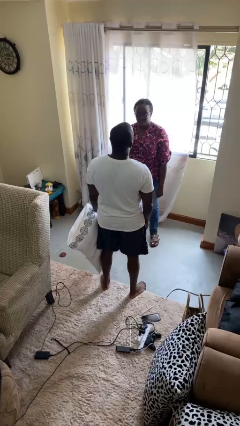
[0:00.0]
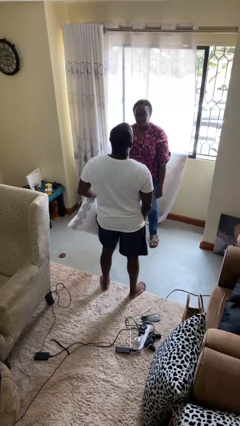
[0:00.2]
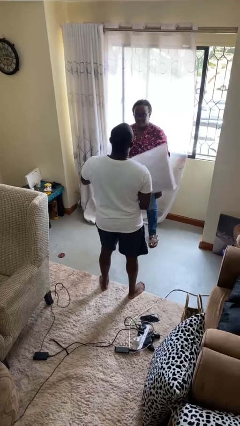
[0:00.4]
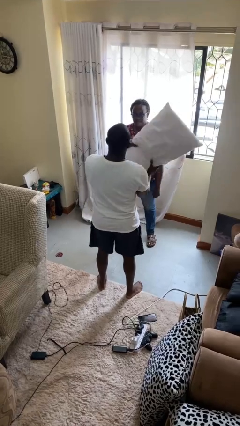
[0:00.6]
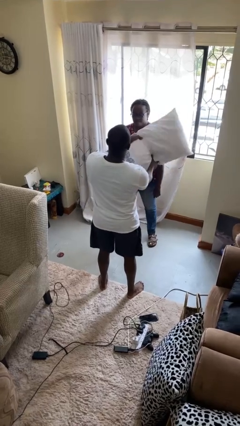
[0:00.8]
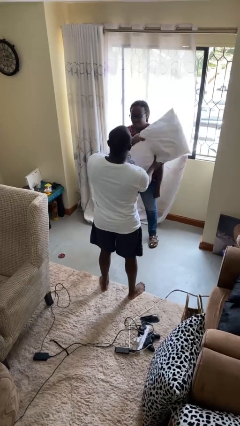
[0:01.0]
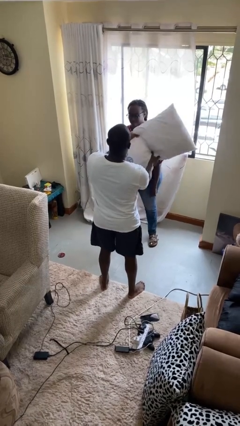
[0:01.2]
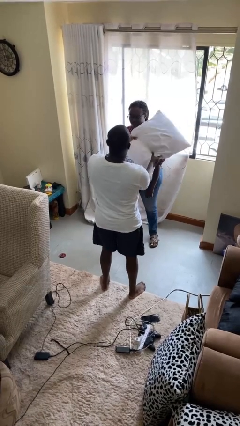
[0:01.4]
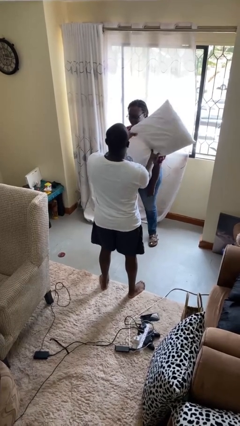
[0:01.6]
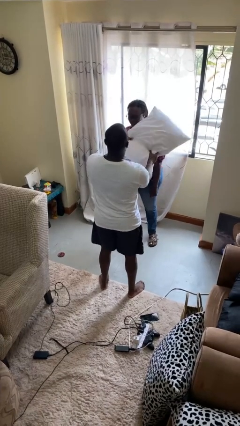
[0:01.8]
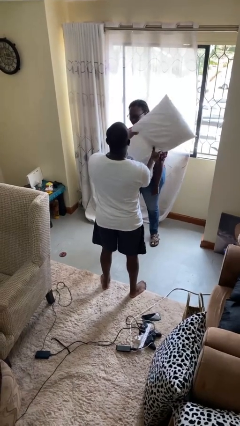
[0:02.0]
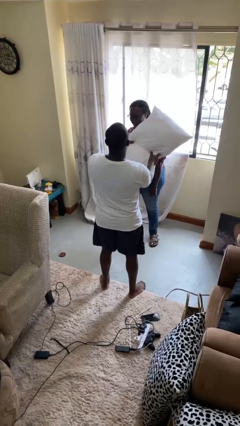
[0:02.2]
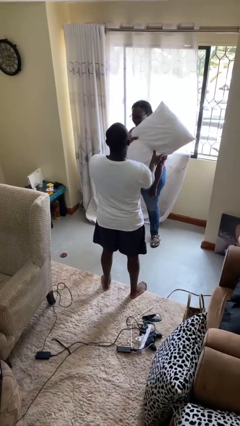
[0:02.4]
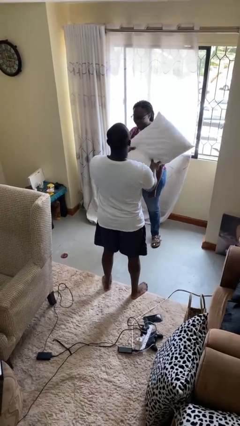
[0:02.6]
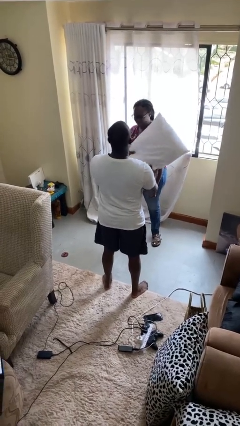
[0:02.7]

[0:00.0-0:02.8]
person hits person with pillow

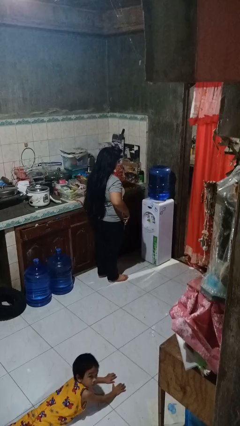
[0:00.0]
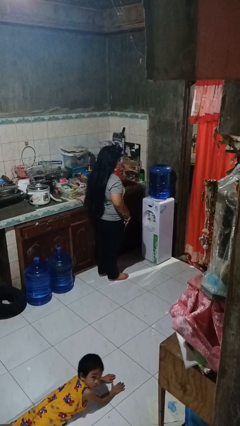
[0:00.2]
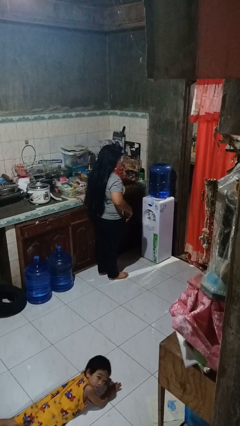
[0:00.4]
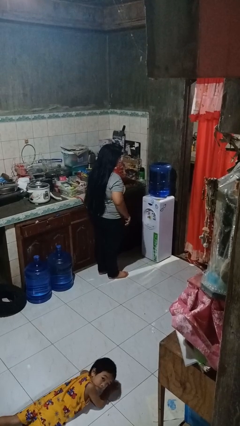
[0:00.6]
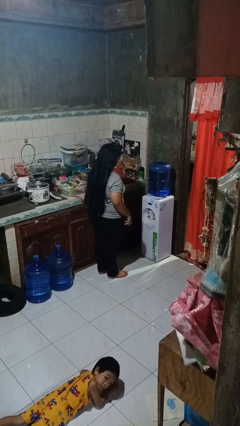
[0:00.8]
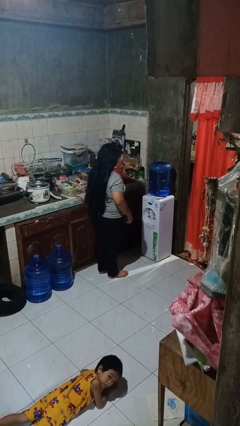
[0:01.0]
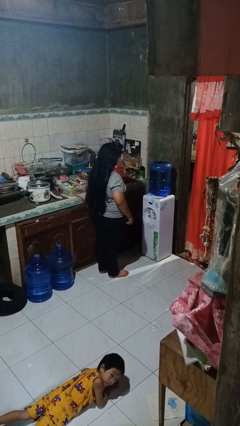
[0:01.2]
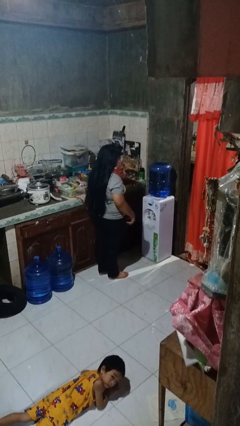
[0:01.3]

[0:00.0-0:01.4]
person puts phone into pocket

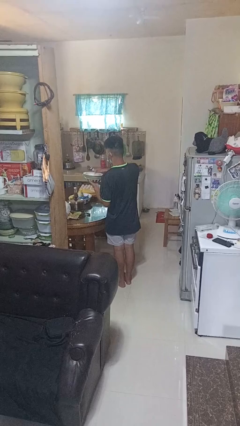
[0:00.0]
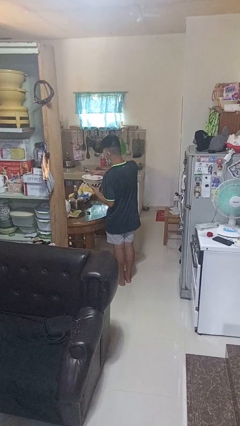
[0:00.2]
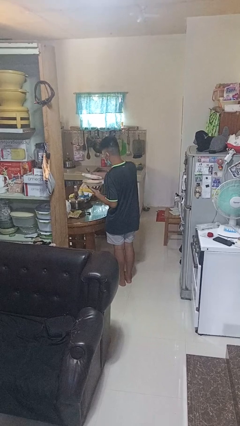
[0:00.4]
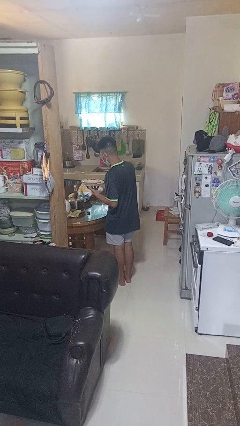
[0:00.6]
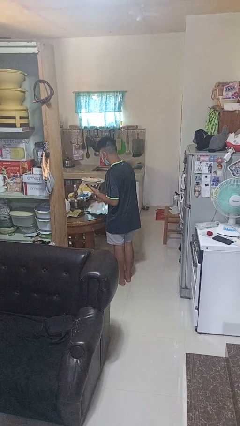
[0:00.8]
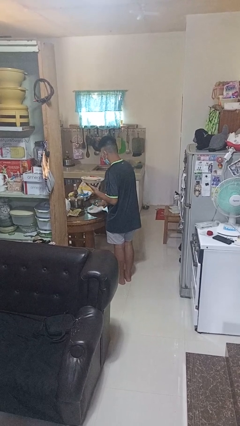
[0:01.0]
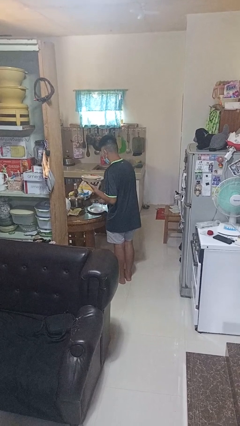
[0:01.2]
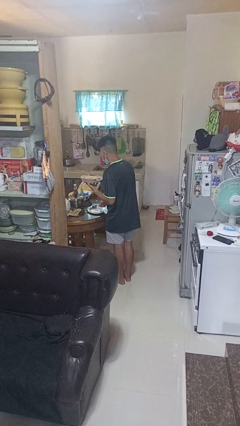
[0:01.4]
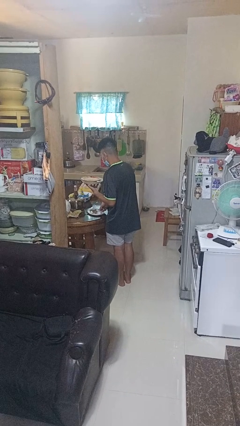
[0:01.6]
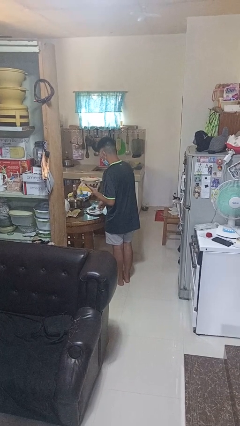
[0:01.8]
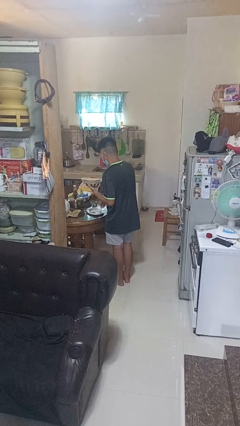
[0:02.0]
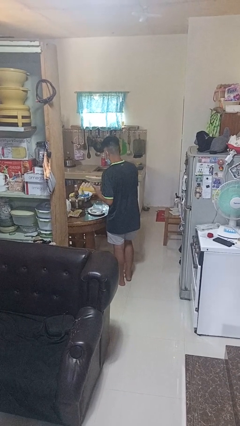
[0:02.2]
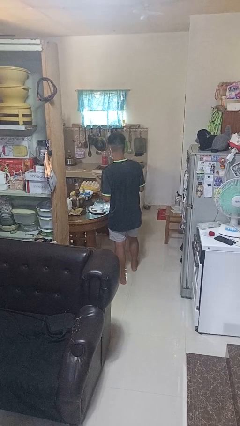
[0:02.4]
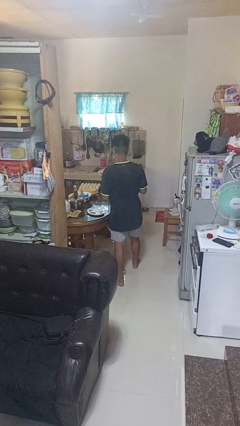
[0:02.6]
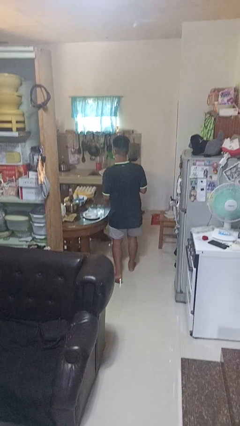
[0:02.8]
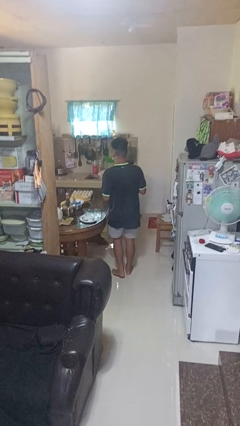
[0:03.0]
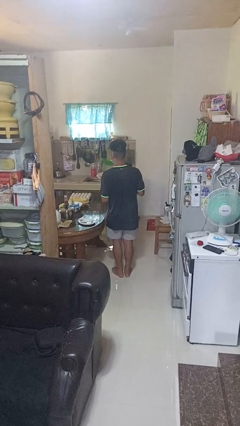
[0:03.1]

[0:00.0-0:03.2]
person sets table

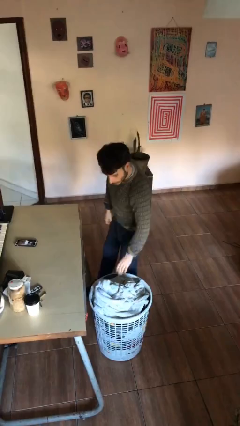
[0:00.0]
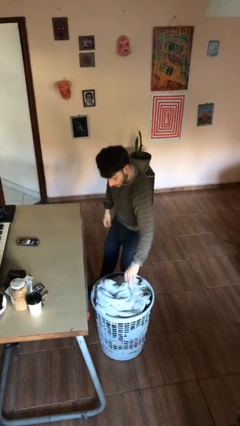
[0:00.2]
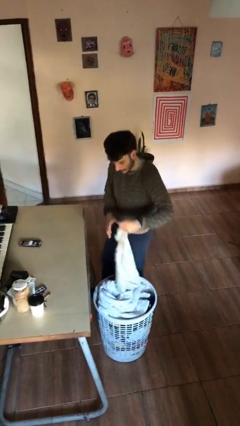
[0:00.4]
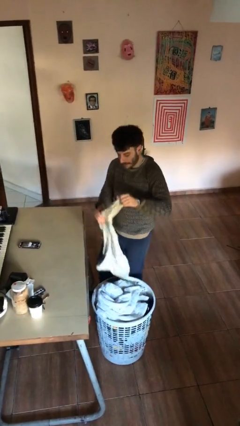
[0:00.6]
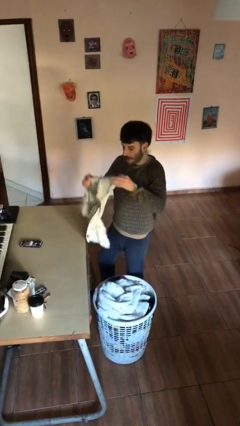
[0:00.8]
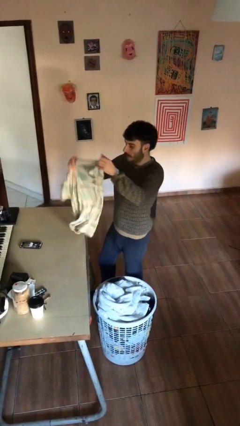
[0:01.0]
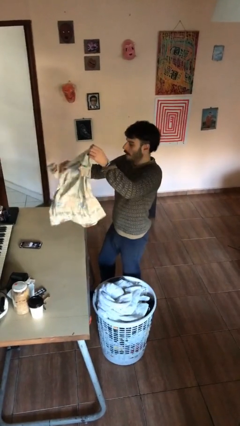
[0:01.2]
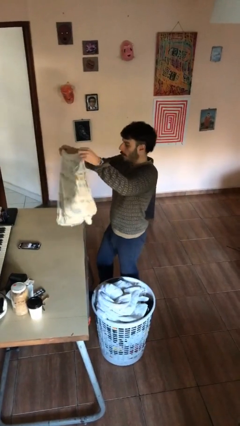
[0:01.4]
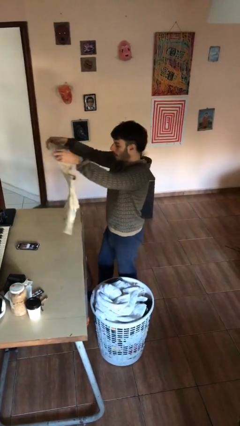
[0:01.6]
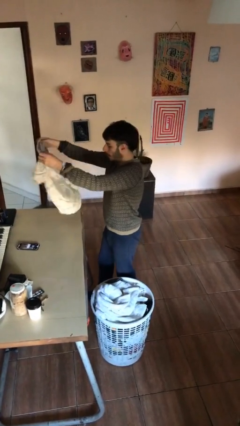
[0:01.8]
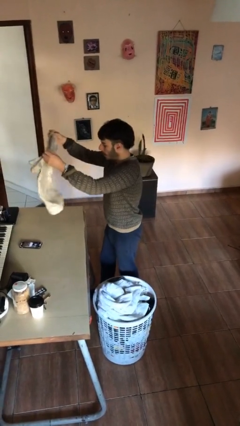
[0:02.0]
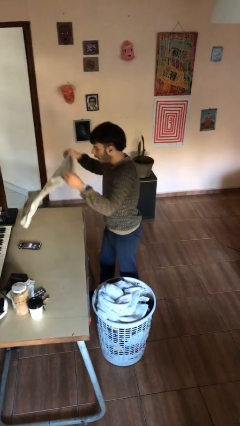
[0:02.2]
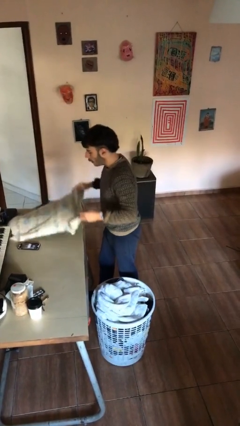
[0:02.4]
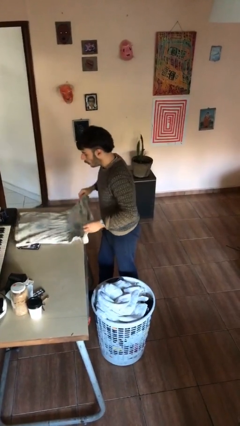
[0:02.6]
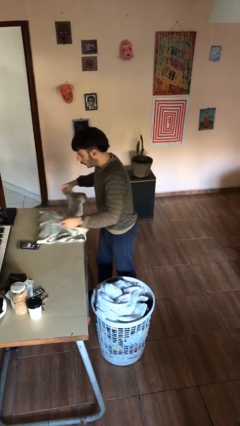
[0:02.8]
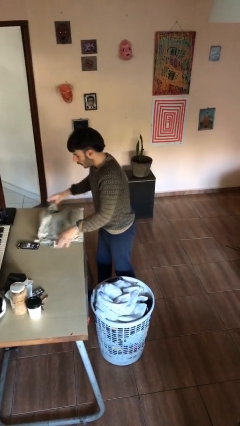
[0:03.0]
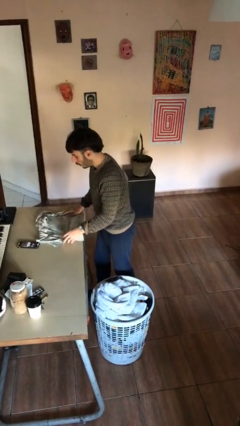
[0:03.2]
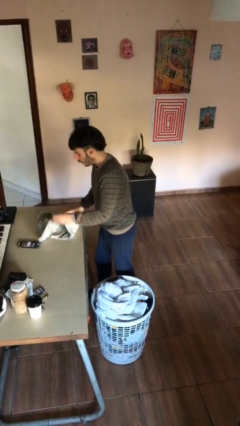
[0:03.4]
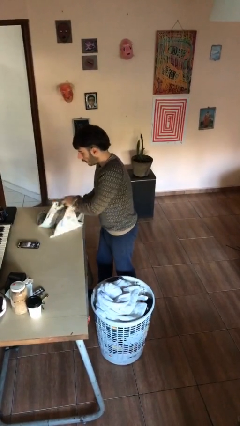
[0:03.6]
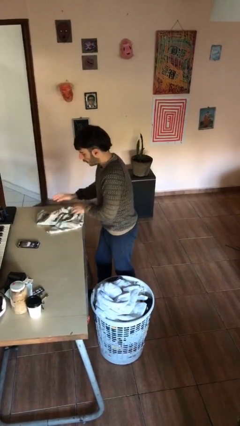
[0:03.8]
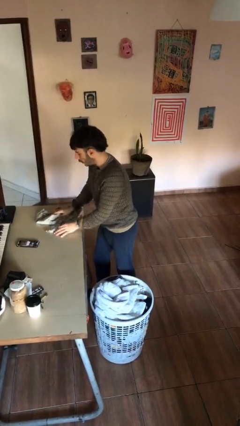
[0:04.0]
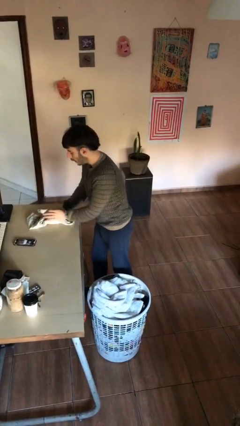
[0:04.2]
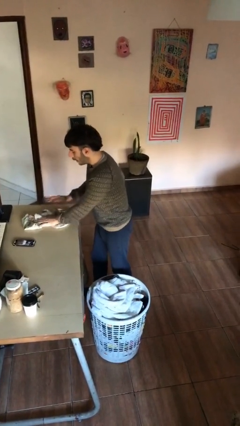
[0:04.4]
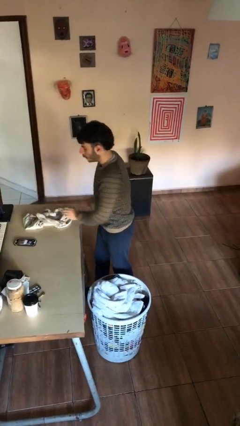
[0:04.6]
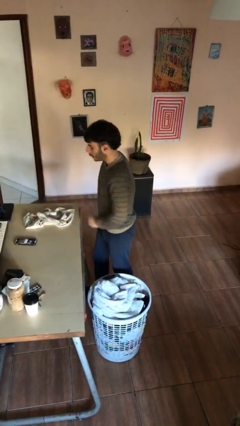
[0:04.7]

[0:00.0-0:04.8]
person folds shirt

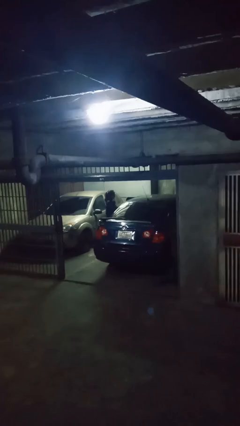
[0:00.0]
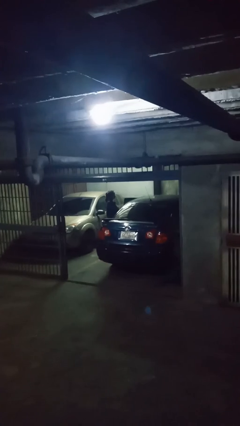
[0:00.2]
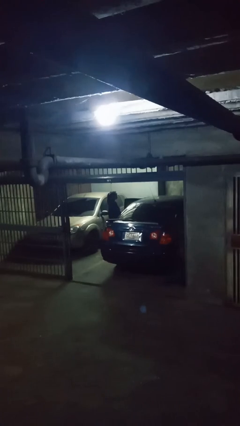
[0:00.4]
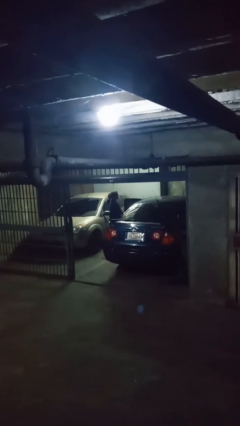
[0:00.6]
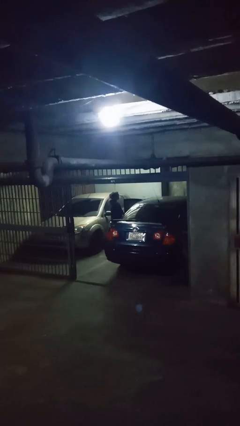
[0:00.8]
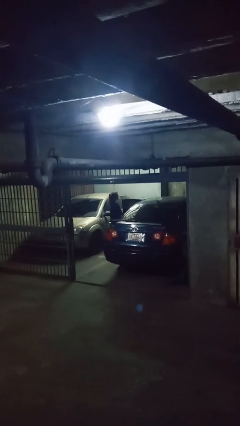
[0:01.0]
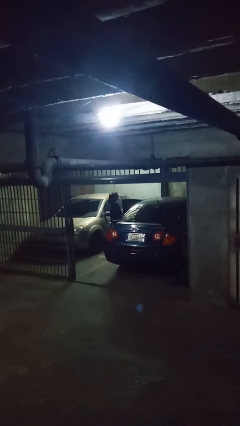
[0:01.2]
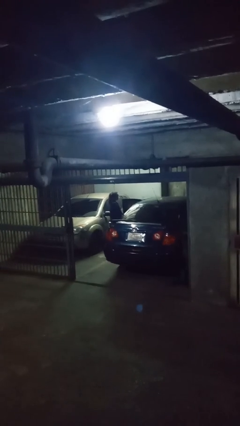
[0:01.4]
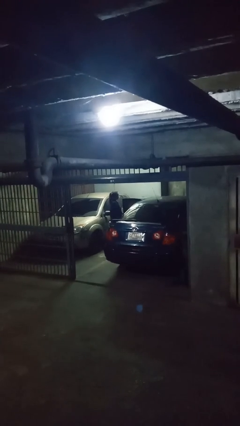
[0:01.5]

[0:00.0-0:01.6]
person opens car door

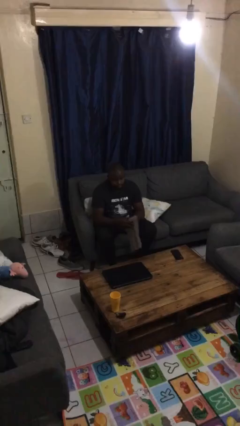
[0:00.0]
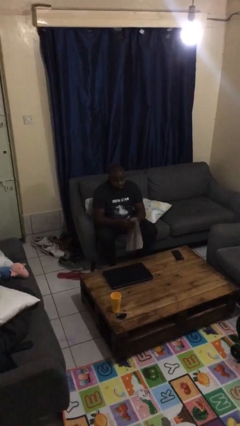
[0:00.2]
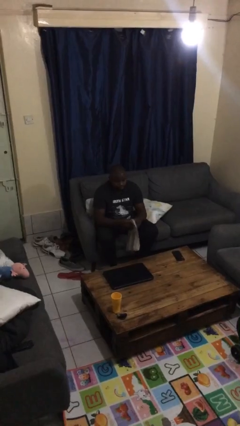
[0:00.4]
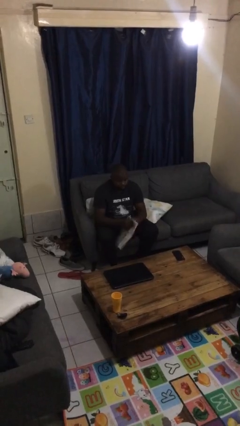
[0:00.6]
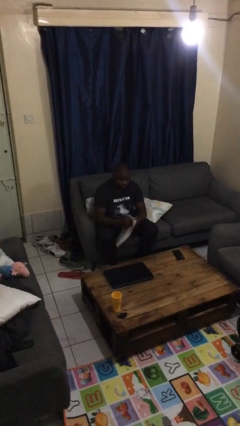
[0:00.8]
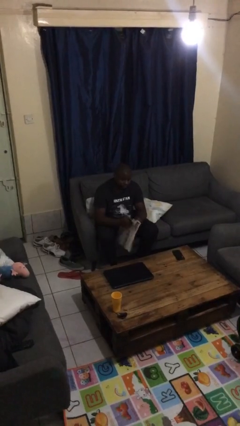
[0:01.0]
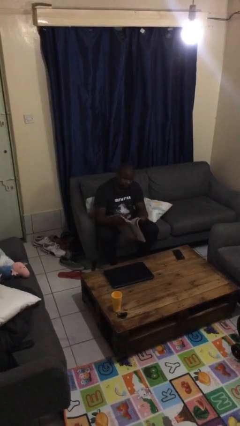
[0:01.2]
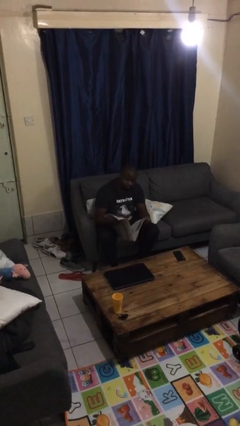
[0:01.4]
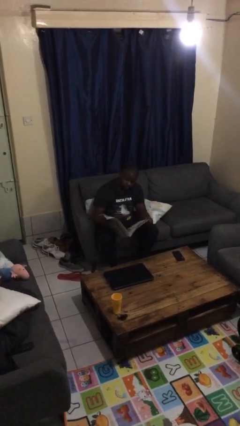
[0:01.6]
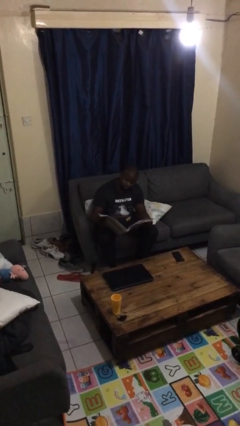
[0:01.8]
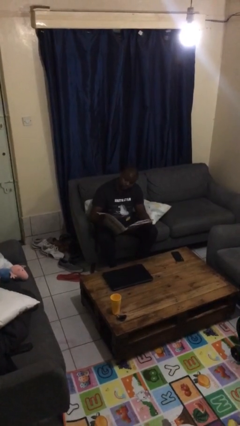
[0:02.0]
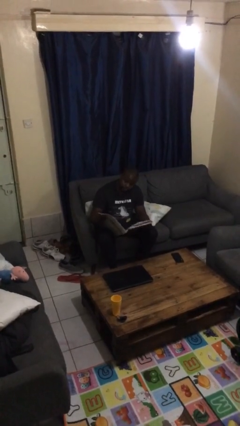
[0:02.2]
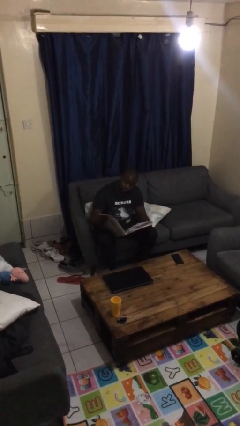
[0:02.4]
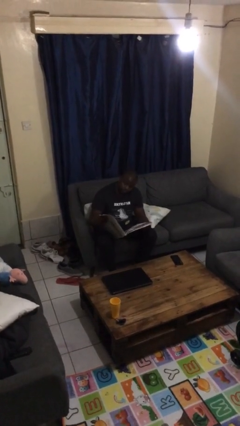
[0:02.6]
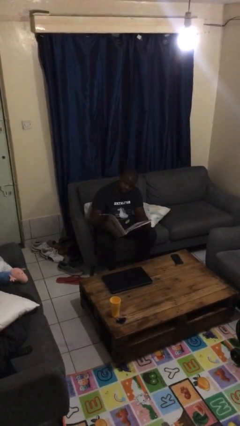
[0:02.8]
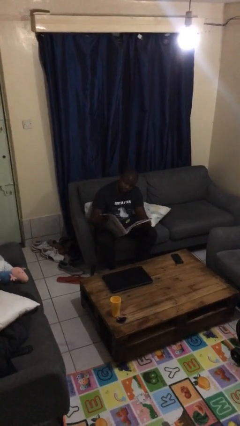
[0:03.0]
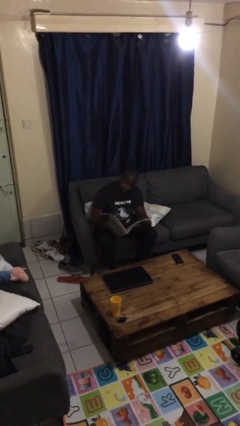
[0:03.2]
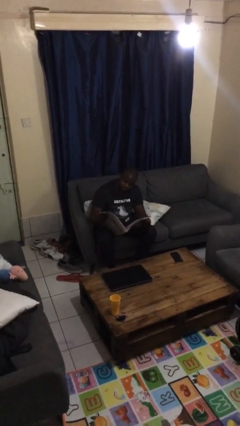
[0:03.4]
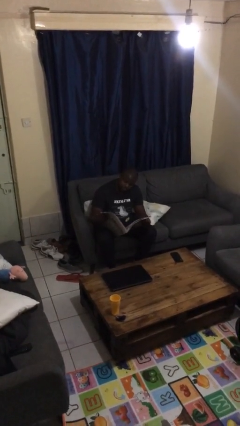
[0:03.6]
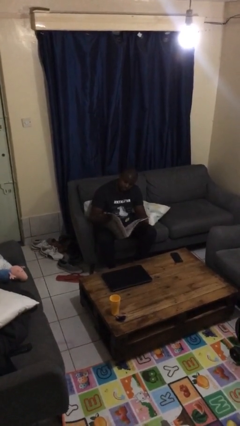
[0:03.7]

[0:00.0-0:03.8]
person reads newspaper
